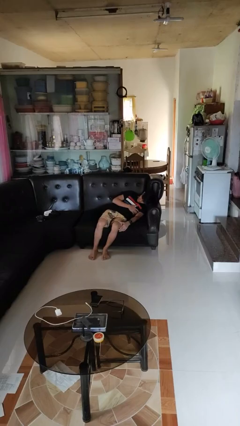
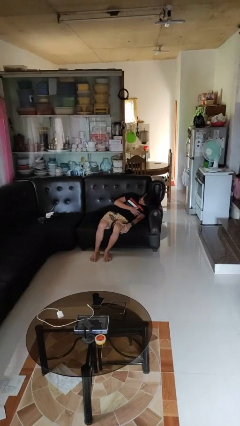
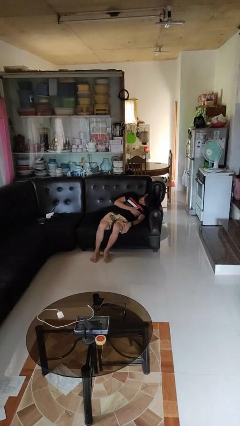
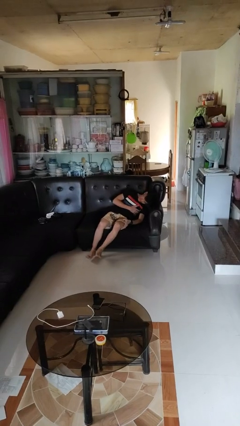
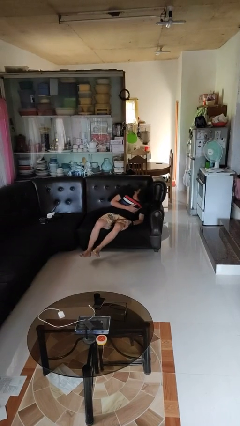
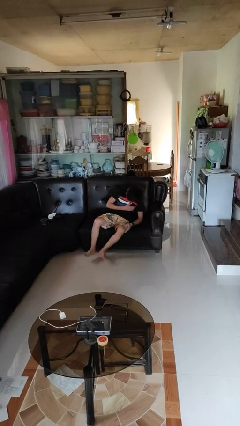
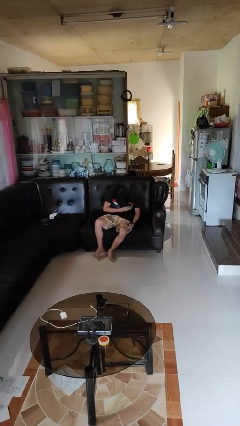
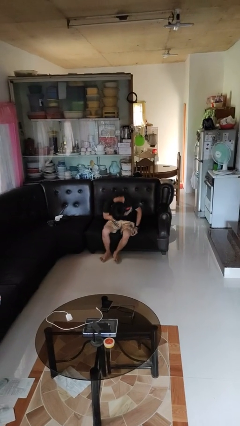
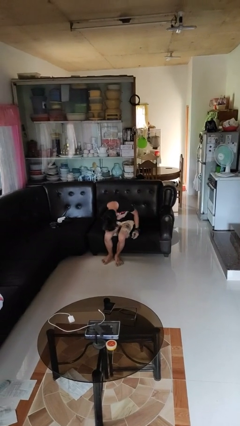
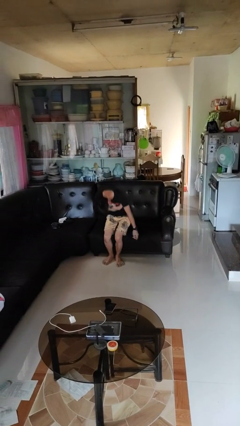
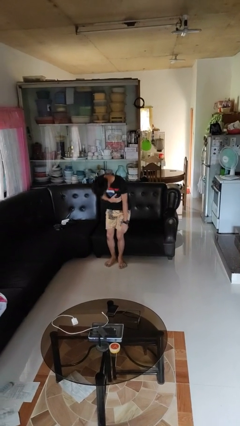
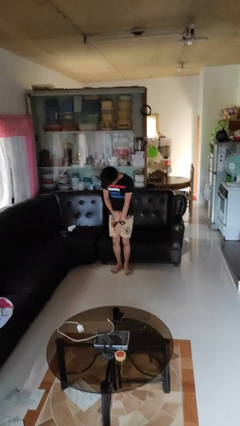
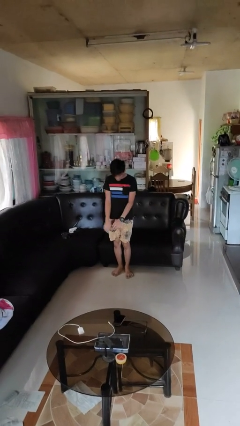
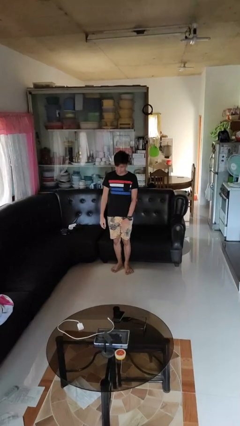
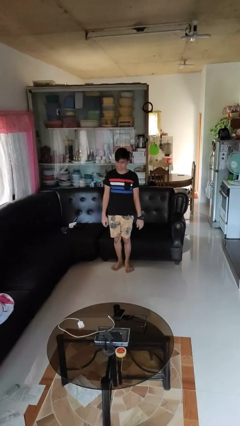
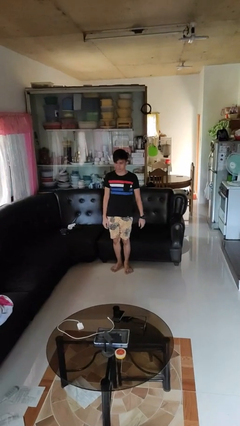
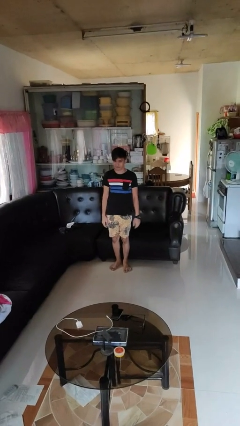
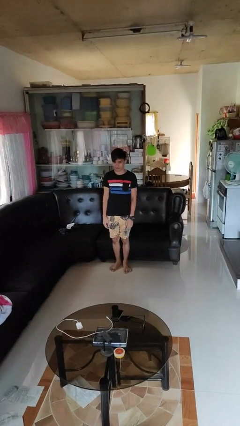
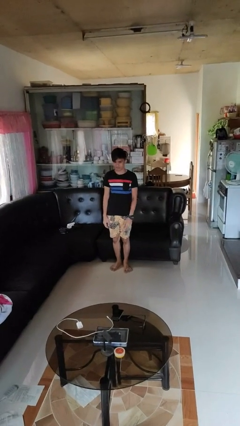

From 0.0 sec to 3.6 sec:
person stands up

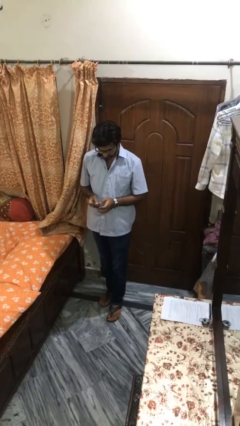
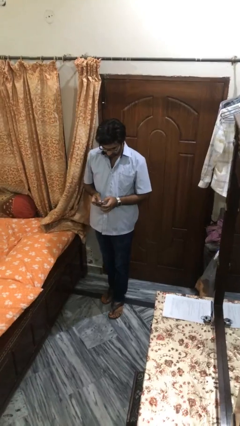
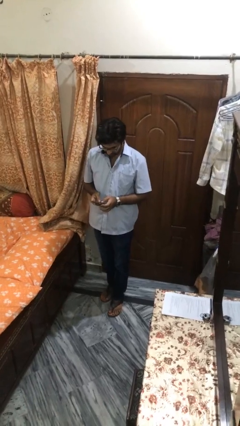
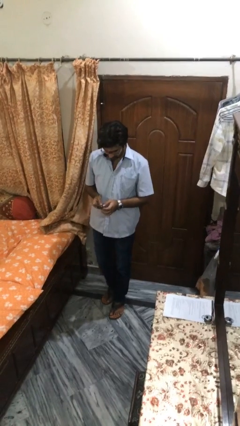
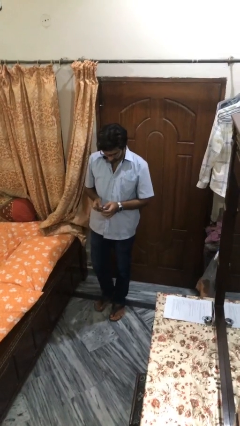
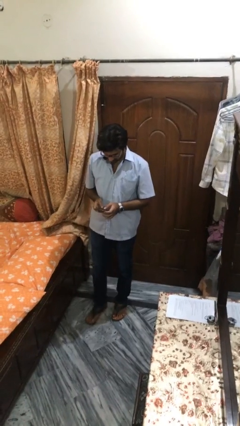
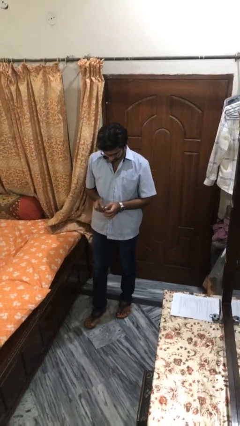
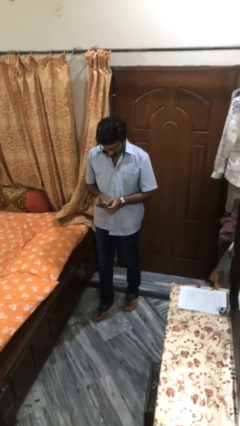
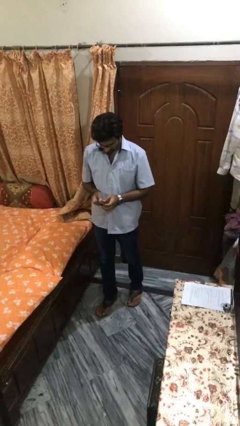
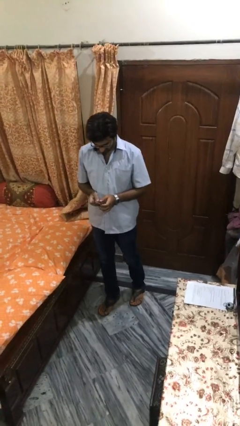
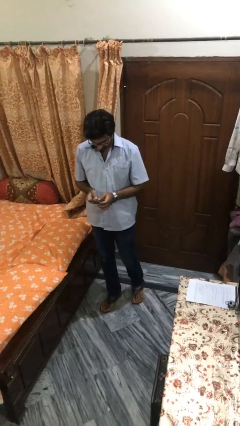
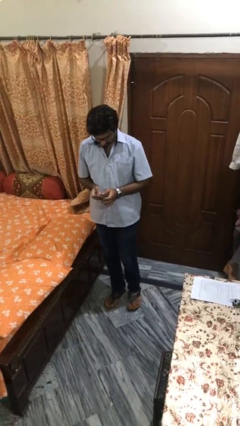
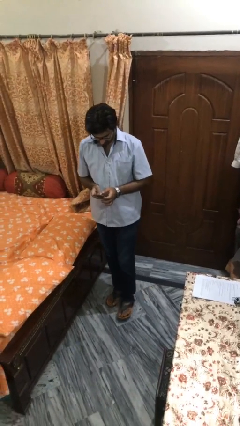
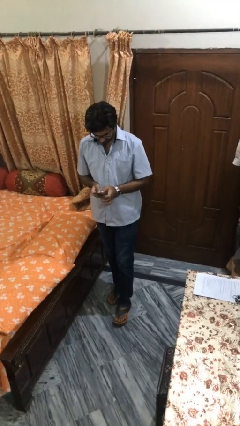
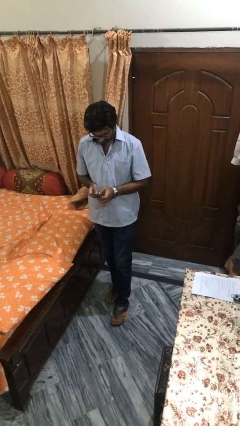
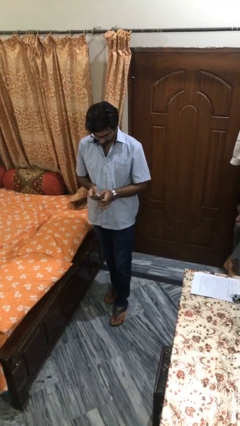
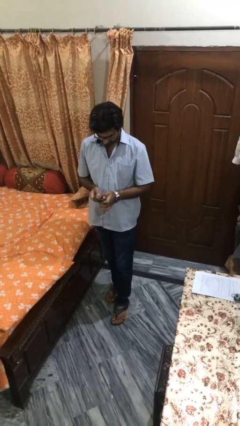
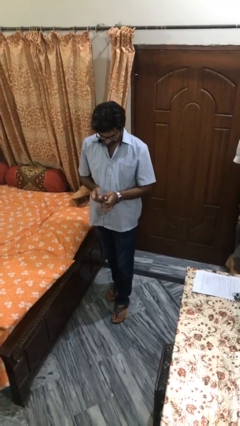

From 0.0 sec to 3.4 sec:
person texts on phone

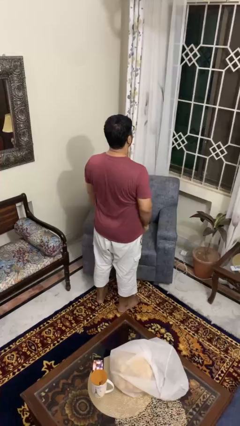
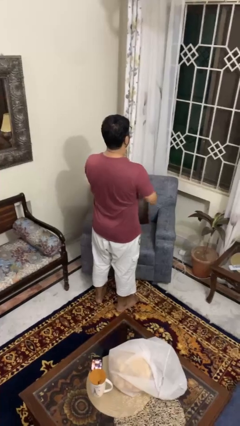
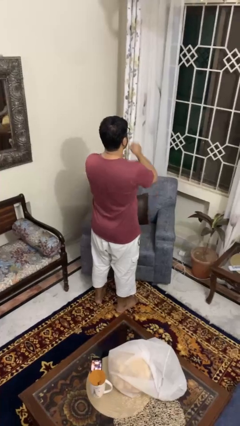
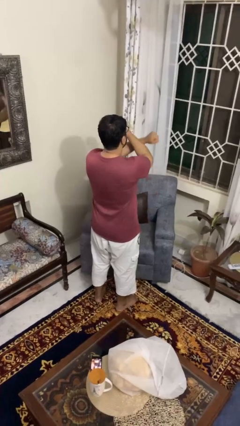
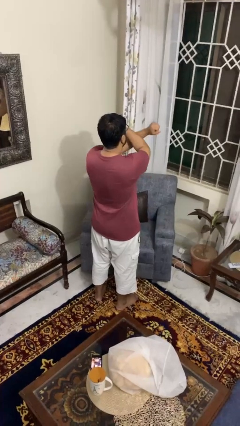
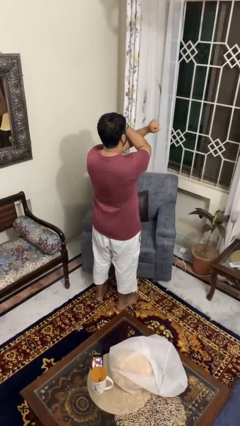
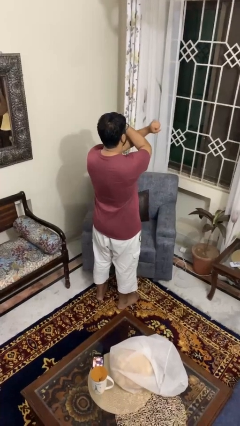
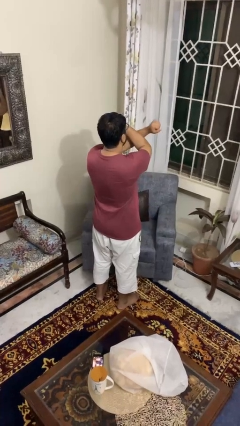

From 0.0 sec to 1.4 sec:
person gestures arms x

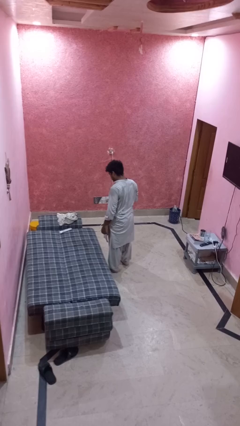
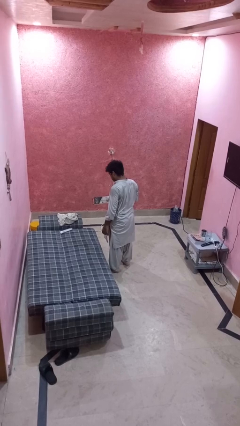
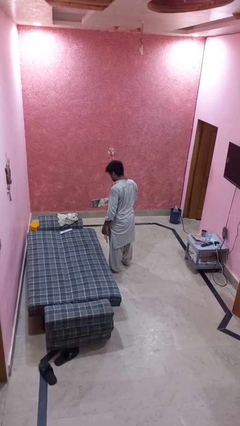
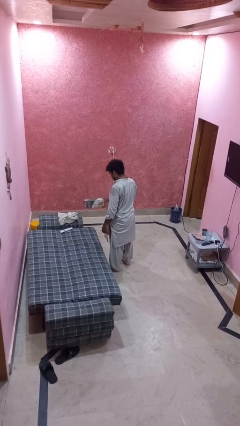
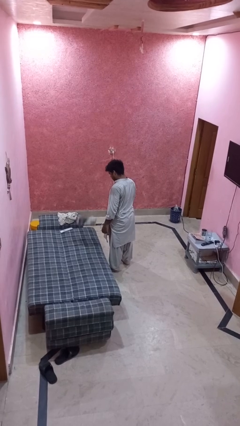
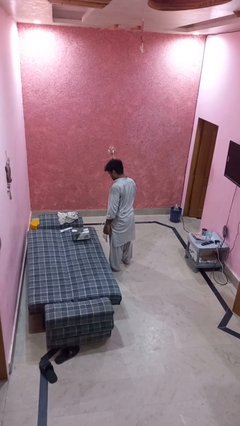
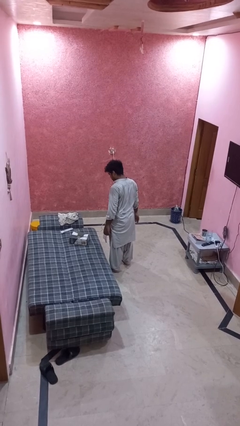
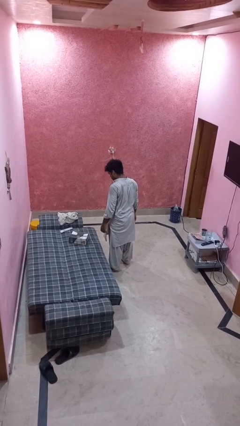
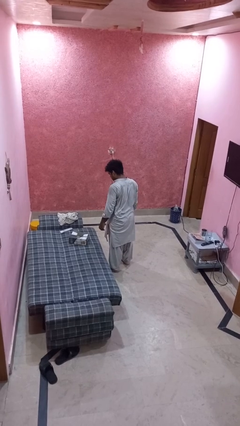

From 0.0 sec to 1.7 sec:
person throws object on bed

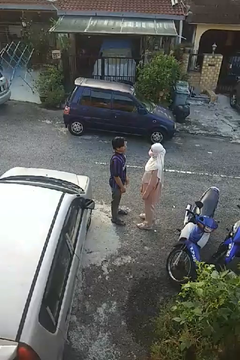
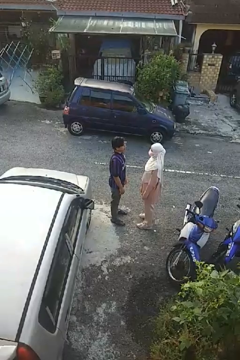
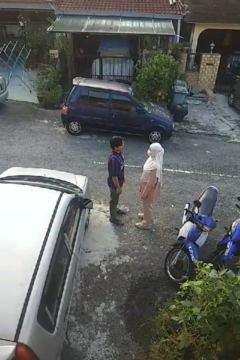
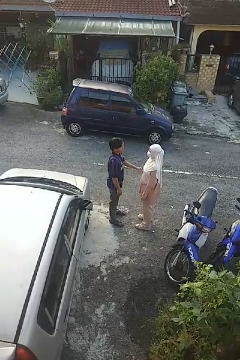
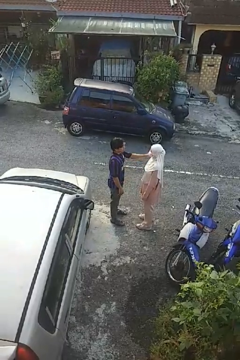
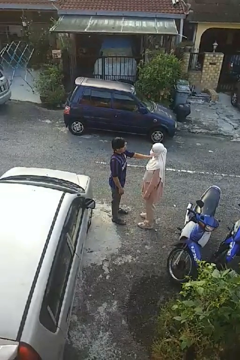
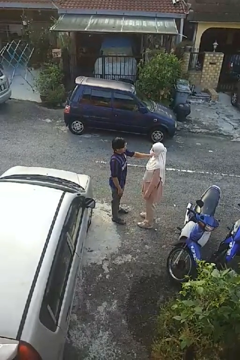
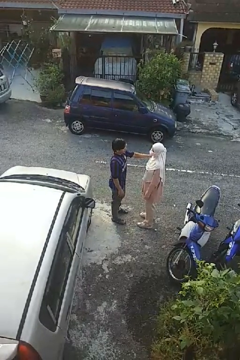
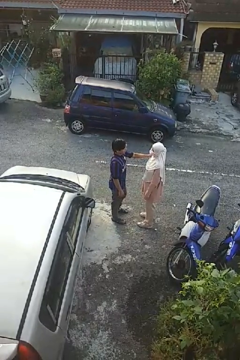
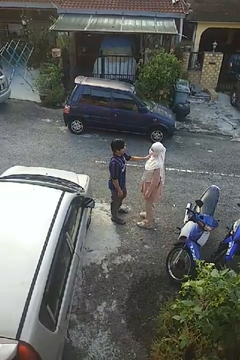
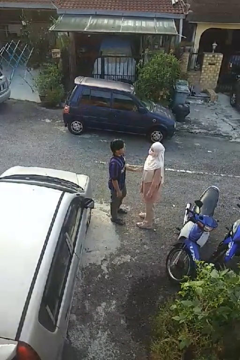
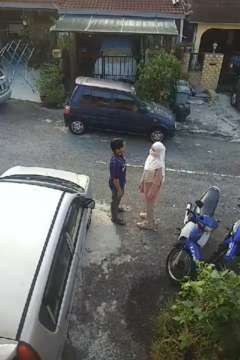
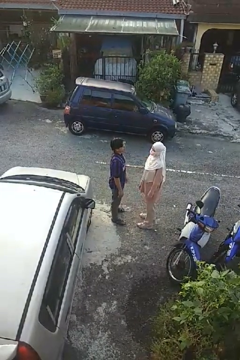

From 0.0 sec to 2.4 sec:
person pounds shoulders of person

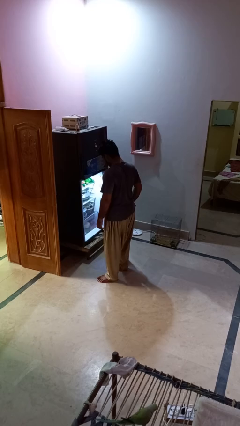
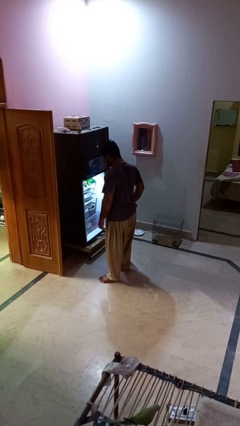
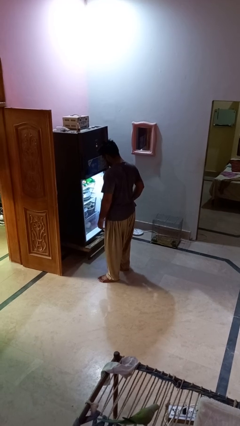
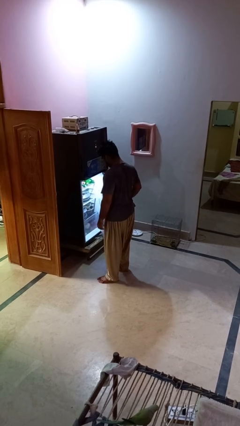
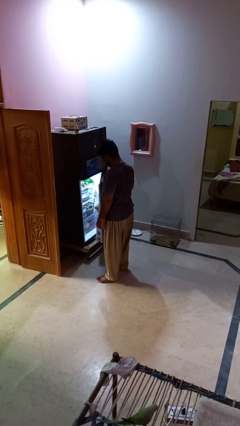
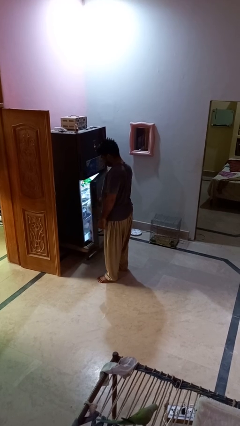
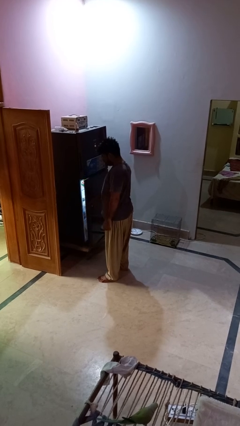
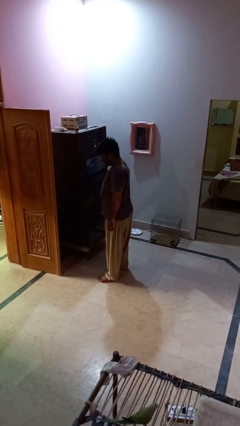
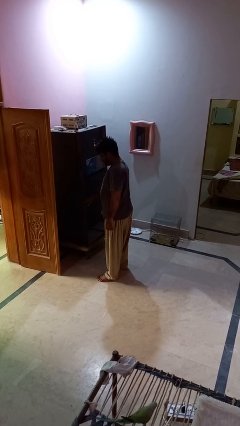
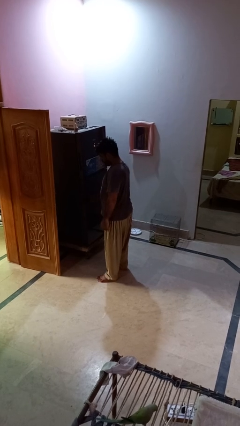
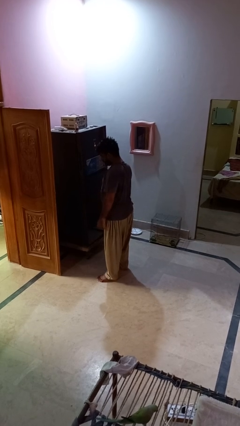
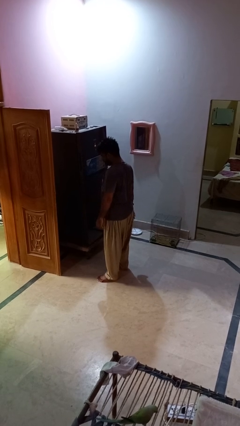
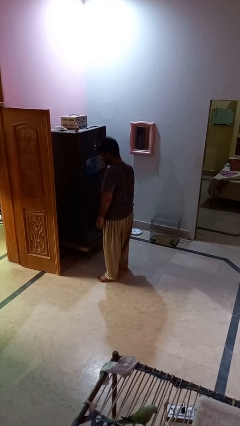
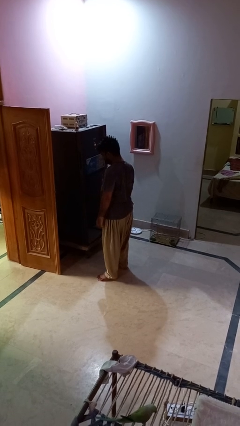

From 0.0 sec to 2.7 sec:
person closes refrigerator

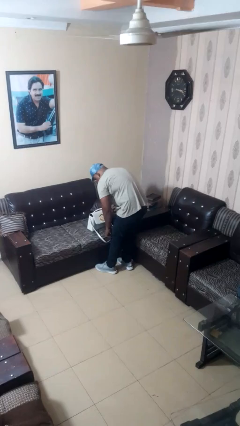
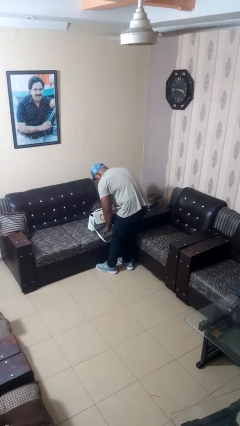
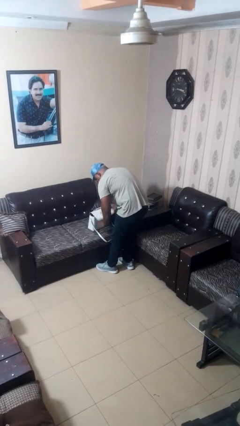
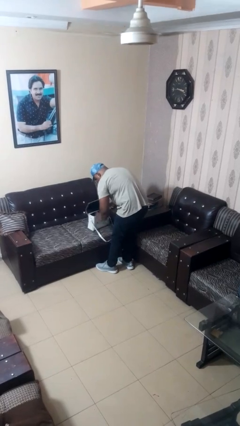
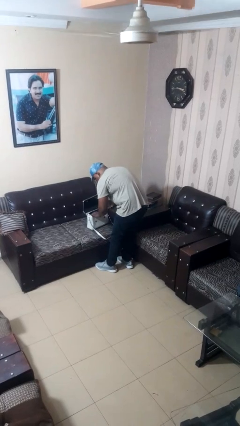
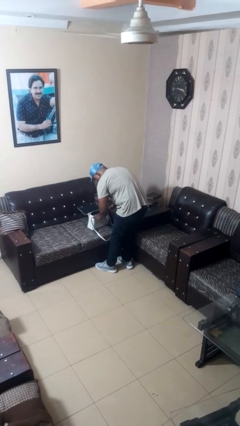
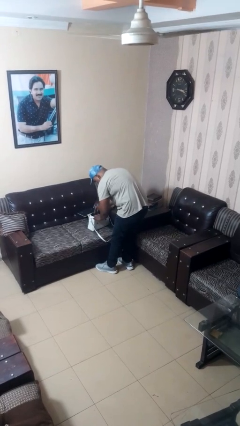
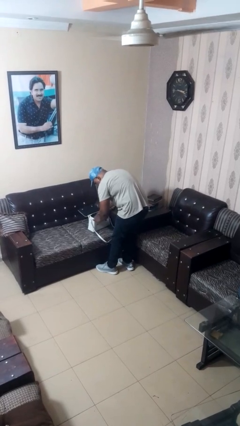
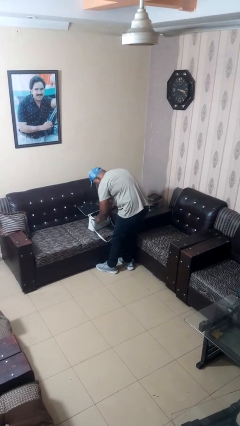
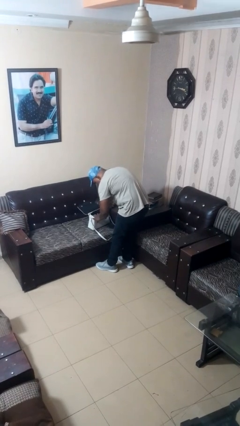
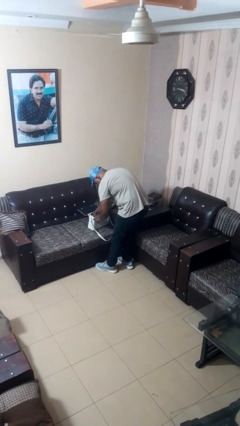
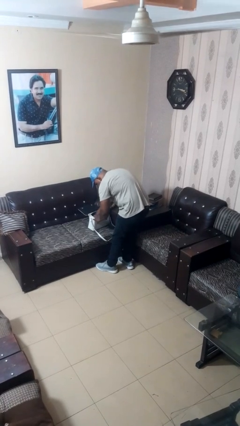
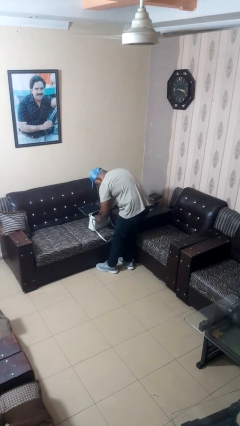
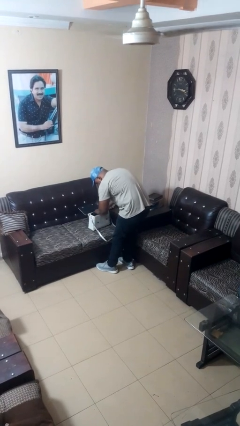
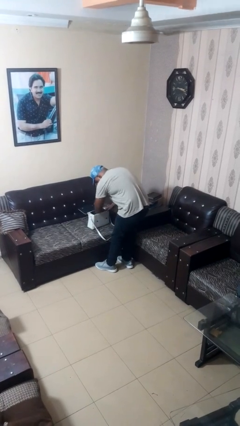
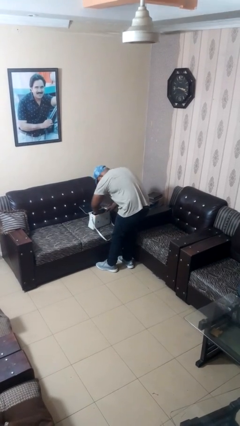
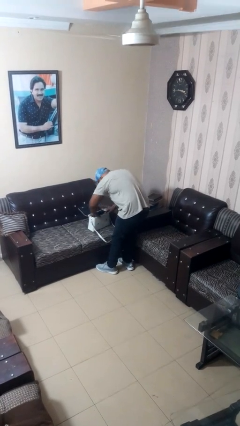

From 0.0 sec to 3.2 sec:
person searches in purse
